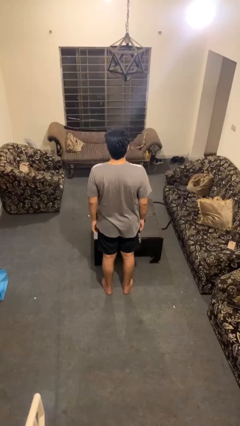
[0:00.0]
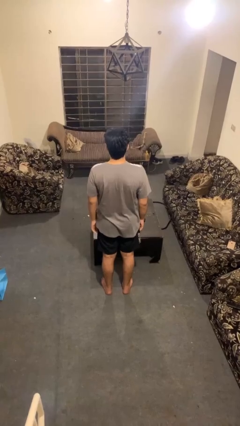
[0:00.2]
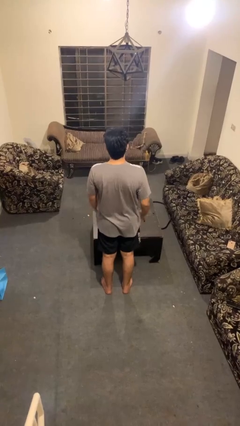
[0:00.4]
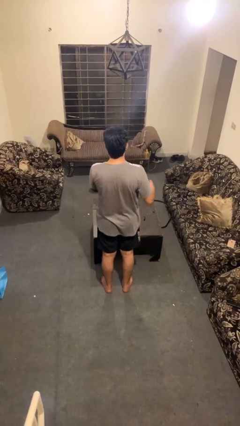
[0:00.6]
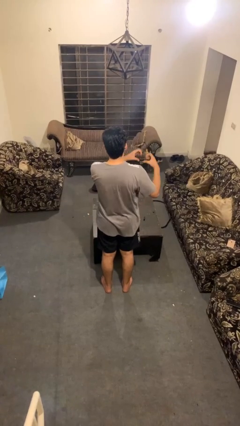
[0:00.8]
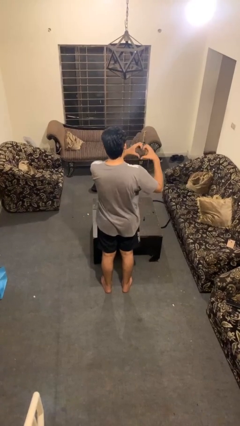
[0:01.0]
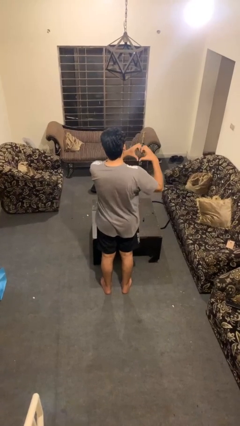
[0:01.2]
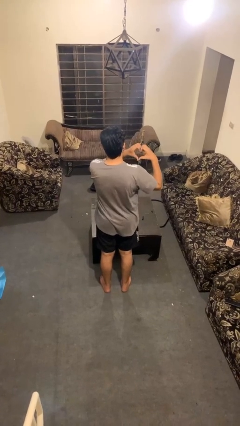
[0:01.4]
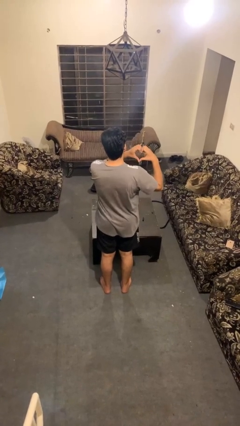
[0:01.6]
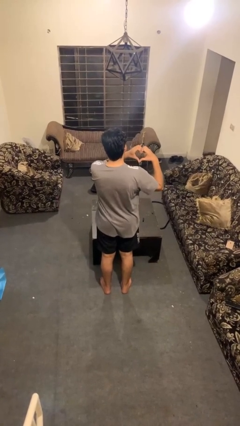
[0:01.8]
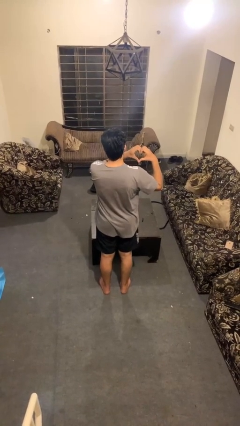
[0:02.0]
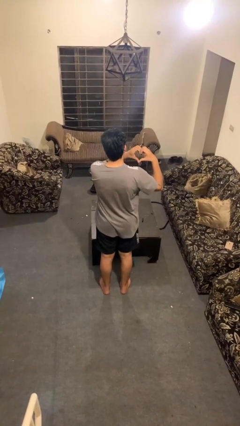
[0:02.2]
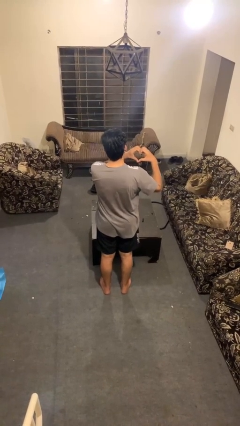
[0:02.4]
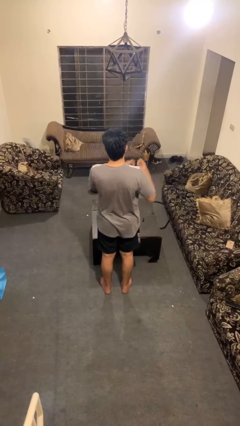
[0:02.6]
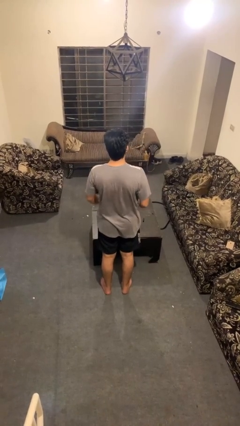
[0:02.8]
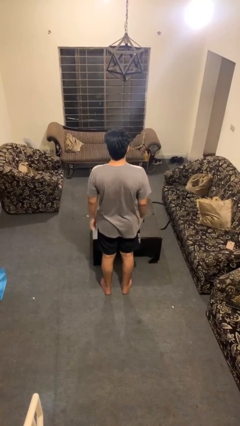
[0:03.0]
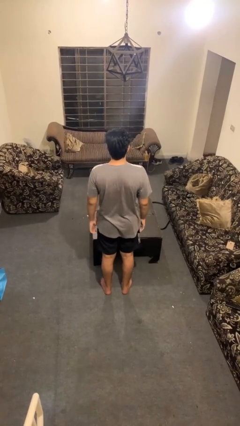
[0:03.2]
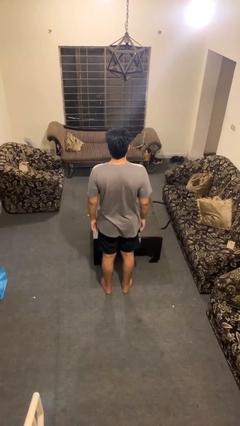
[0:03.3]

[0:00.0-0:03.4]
person gestures heart

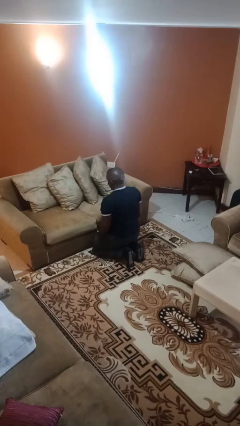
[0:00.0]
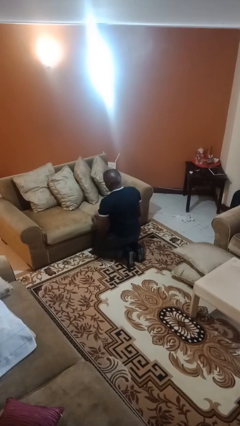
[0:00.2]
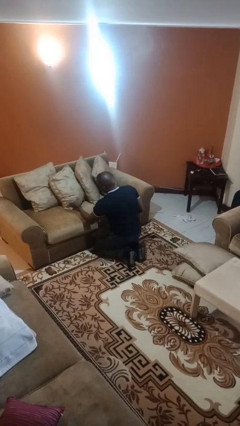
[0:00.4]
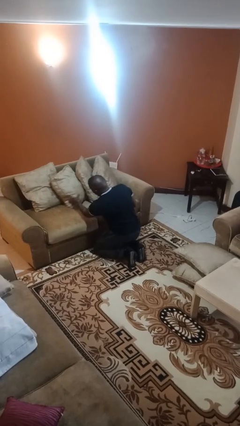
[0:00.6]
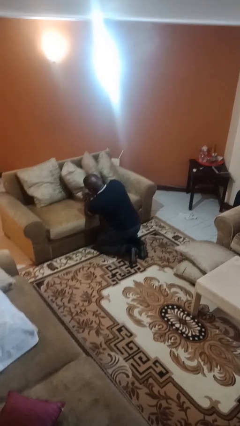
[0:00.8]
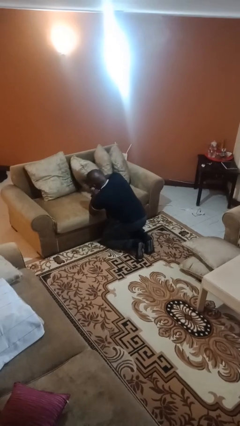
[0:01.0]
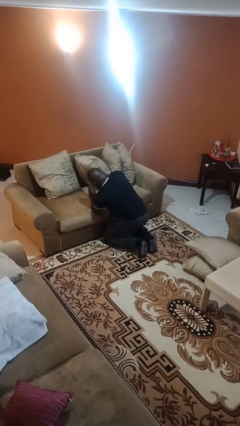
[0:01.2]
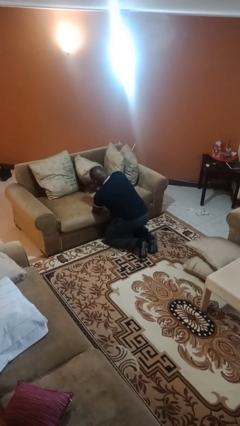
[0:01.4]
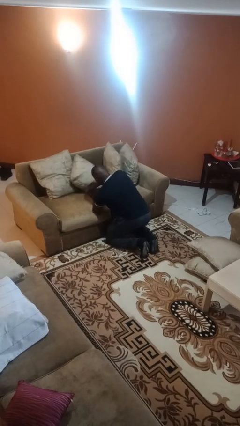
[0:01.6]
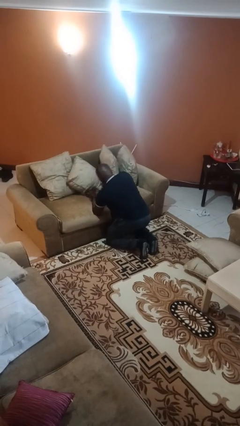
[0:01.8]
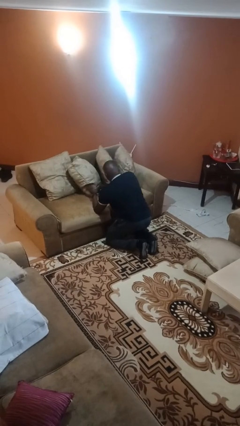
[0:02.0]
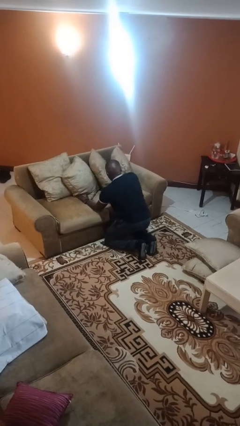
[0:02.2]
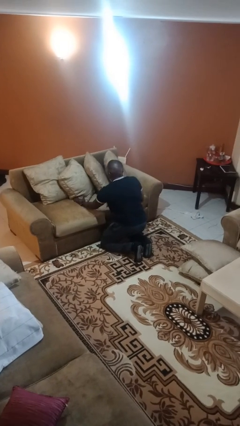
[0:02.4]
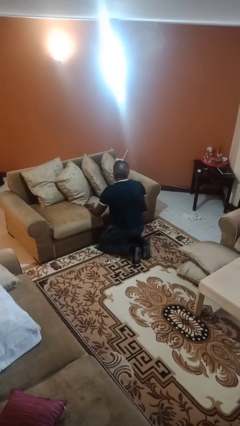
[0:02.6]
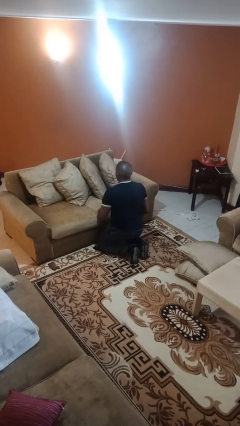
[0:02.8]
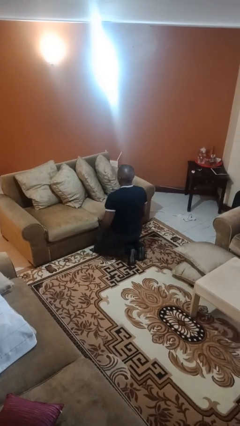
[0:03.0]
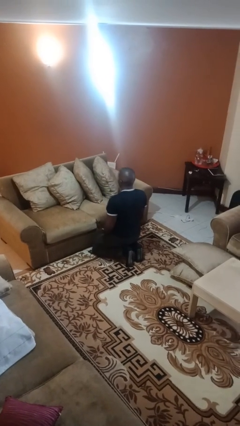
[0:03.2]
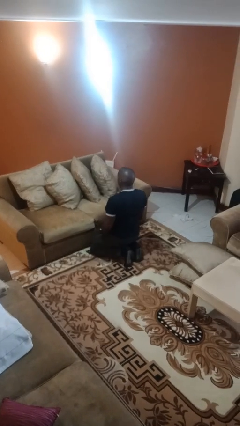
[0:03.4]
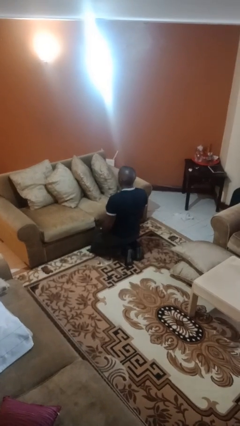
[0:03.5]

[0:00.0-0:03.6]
person searches in couch

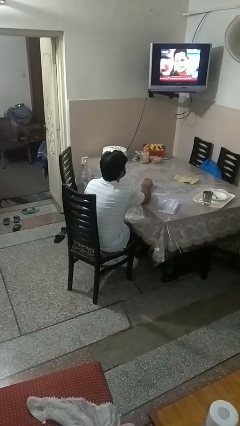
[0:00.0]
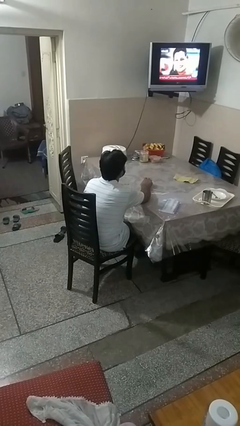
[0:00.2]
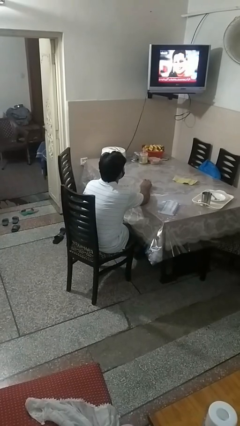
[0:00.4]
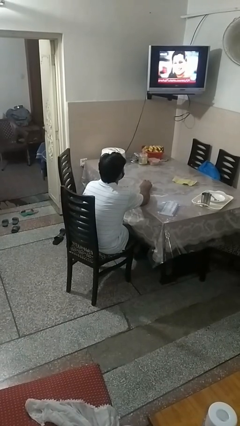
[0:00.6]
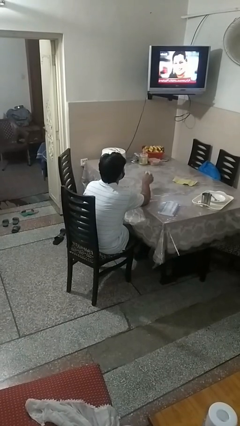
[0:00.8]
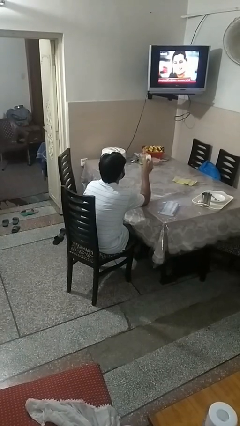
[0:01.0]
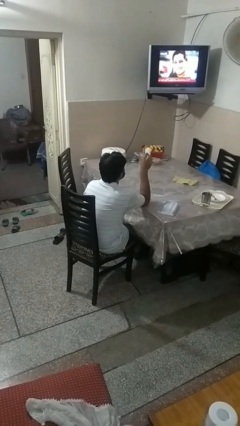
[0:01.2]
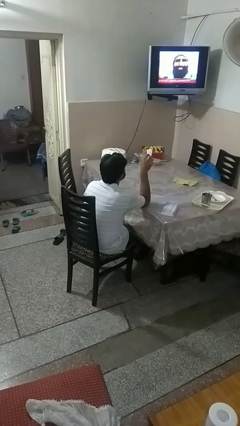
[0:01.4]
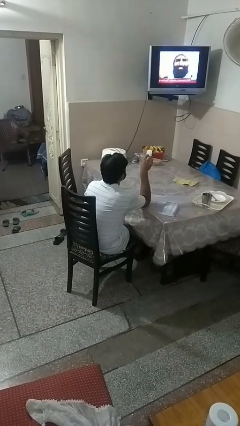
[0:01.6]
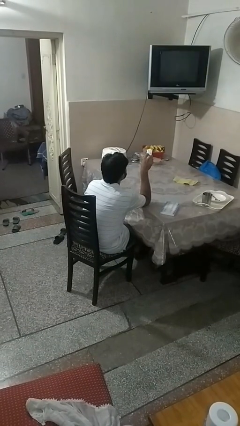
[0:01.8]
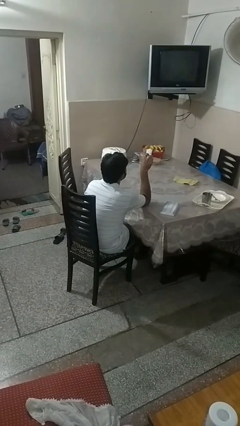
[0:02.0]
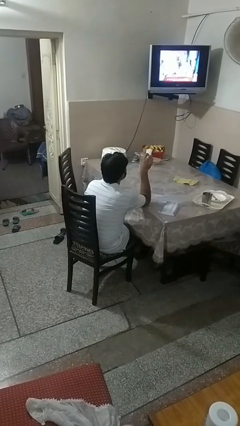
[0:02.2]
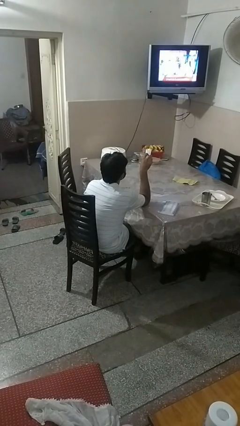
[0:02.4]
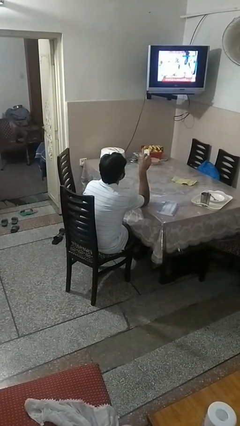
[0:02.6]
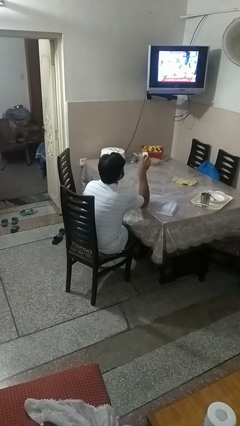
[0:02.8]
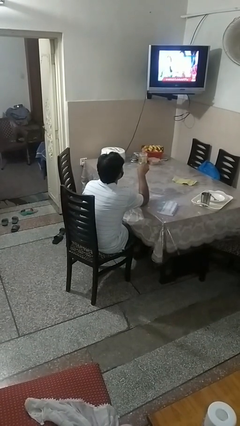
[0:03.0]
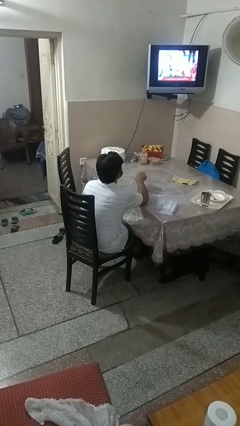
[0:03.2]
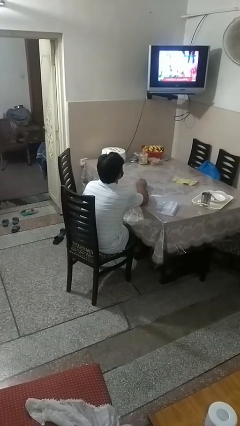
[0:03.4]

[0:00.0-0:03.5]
person uses television remote

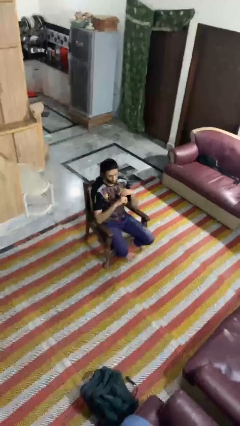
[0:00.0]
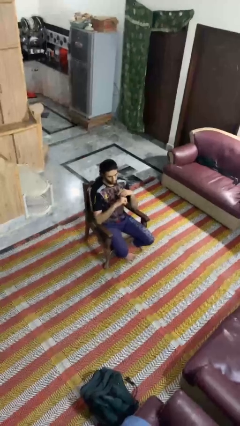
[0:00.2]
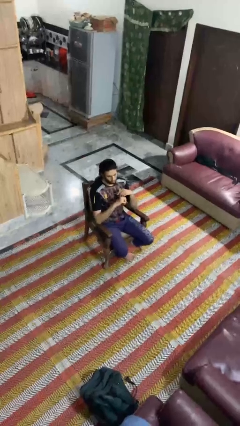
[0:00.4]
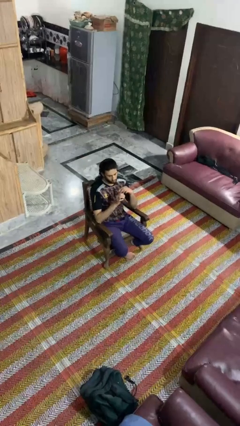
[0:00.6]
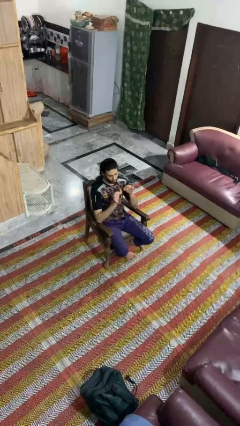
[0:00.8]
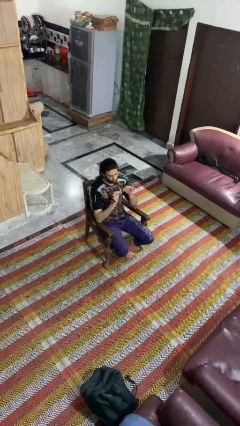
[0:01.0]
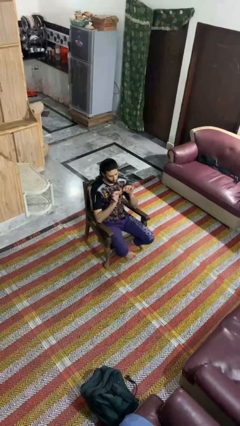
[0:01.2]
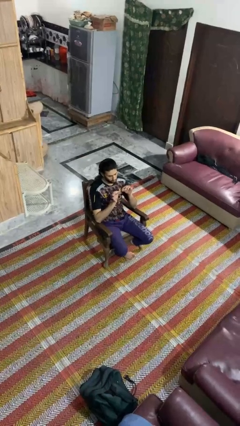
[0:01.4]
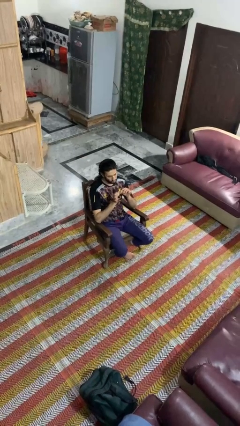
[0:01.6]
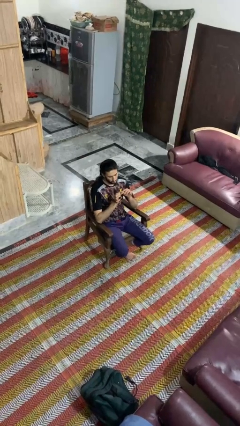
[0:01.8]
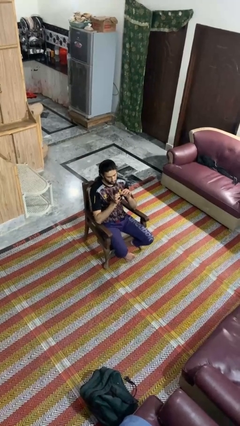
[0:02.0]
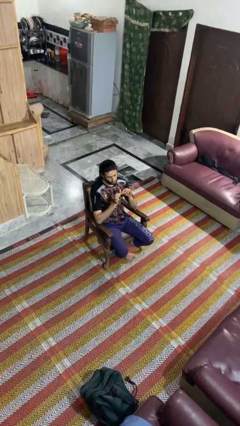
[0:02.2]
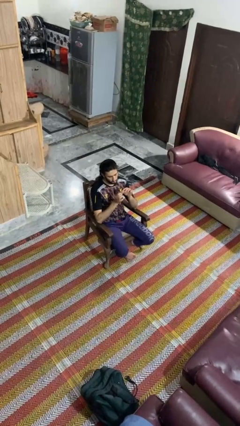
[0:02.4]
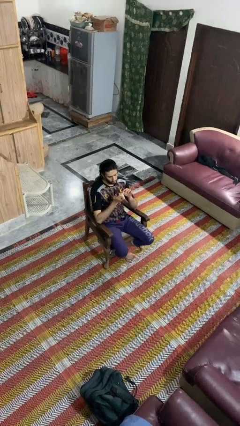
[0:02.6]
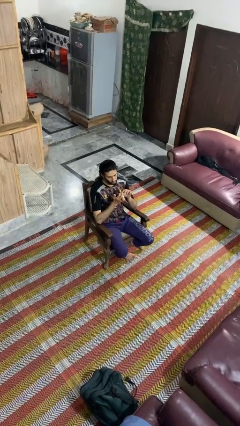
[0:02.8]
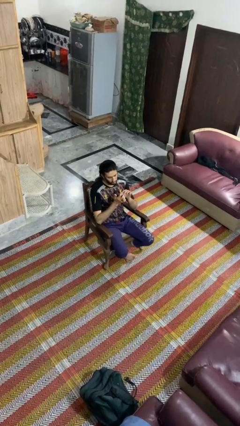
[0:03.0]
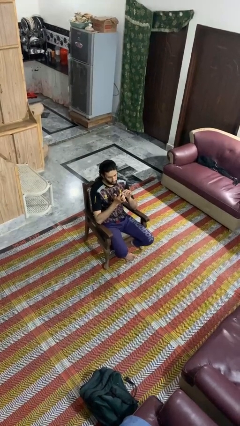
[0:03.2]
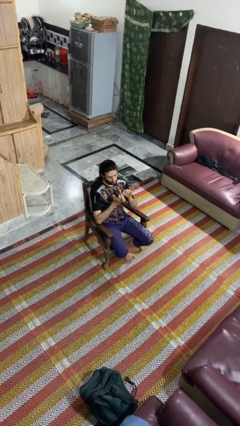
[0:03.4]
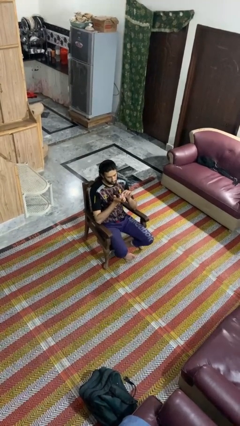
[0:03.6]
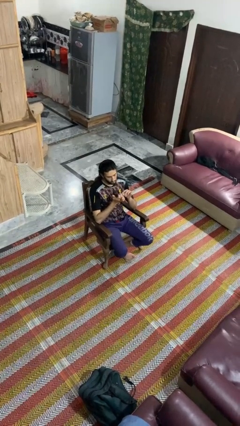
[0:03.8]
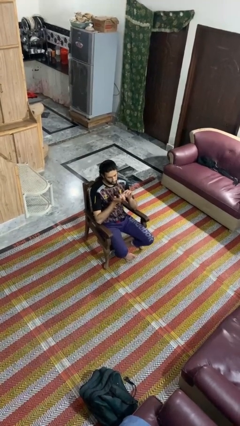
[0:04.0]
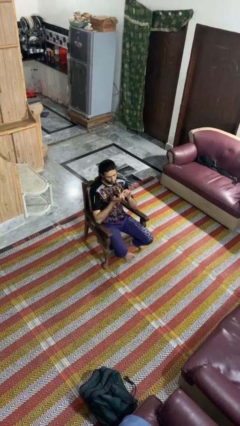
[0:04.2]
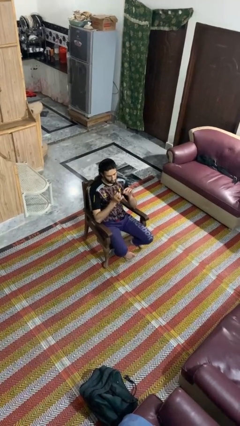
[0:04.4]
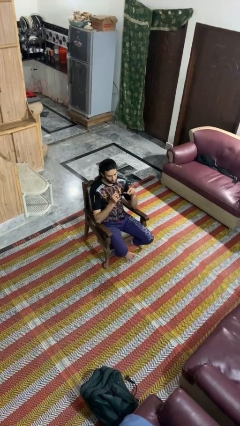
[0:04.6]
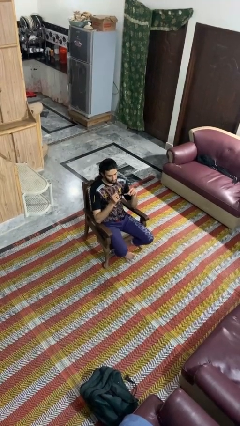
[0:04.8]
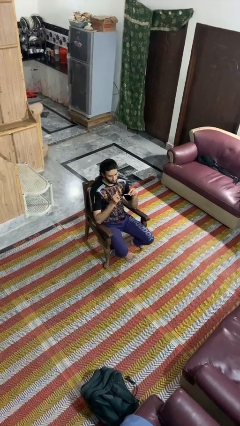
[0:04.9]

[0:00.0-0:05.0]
person files fingernails

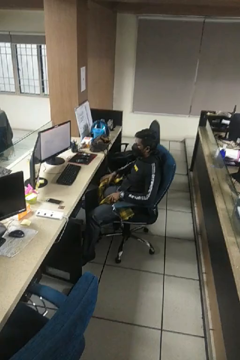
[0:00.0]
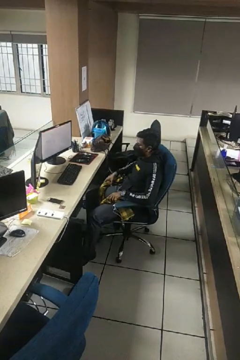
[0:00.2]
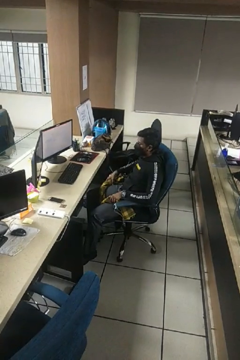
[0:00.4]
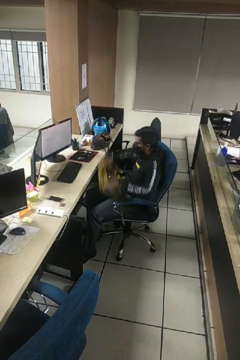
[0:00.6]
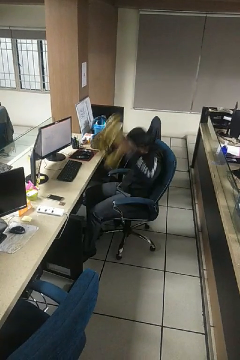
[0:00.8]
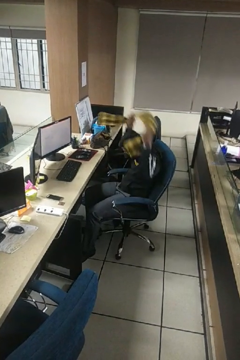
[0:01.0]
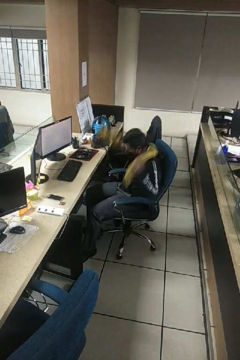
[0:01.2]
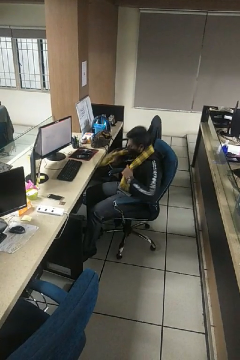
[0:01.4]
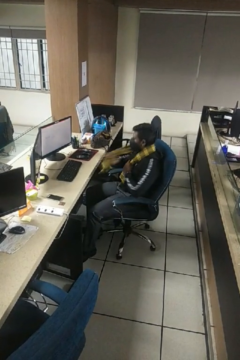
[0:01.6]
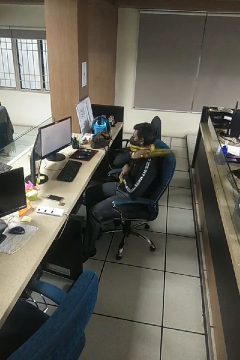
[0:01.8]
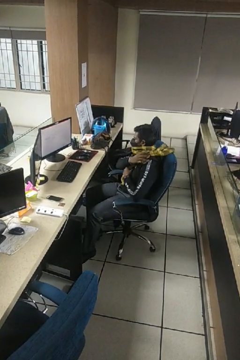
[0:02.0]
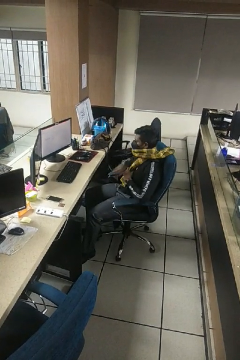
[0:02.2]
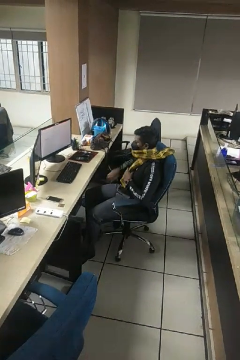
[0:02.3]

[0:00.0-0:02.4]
person puts on scarf
